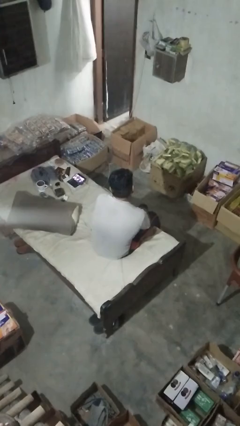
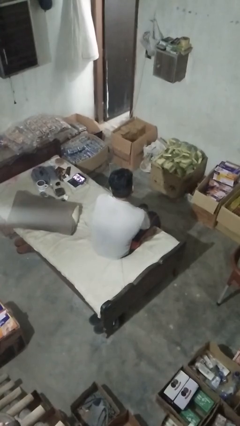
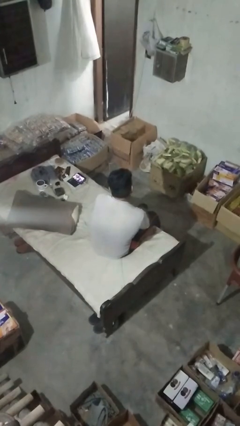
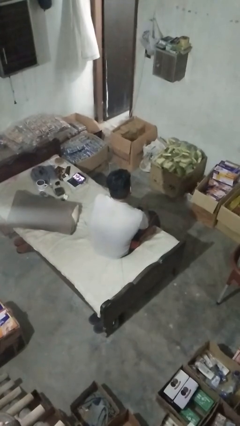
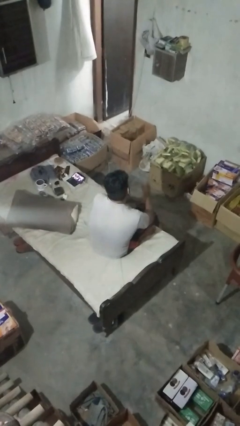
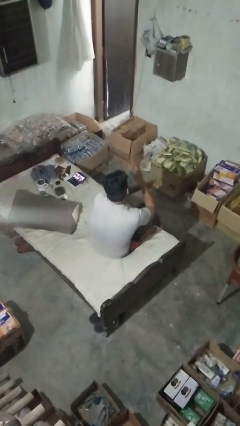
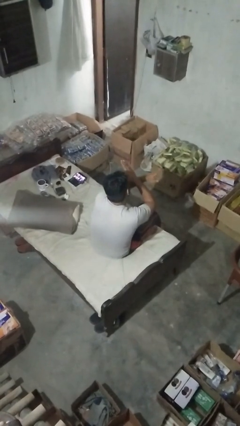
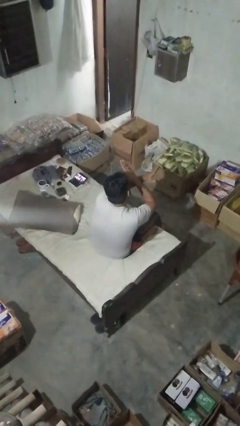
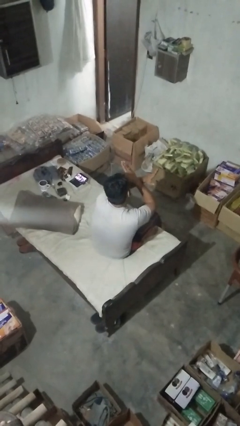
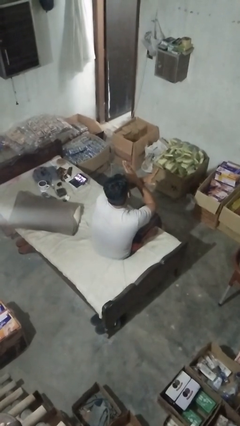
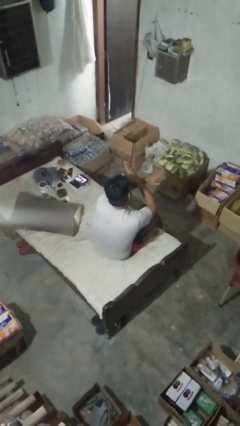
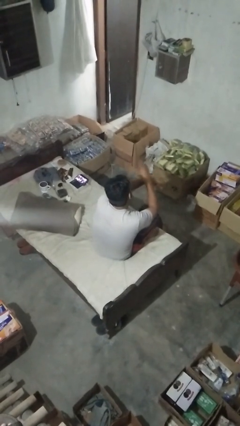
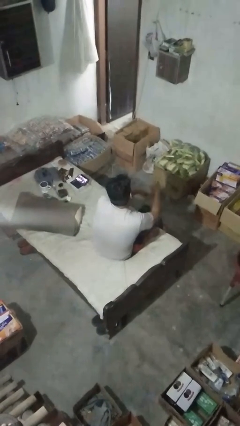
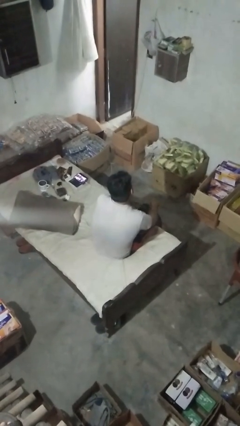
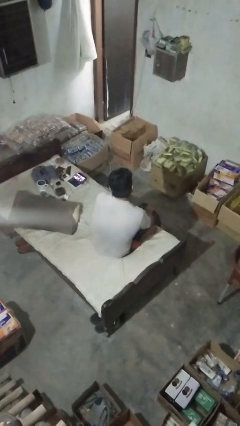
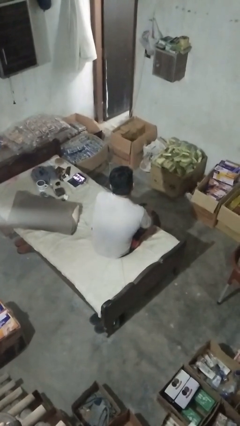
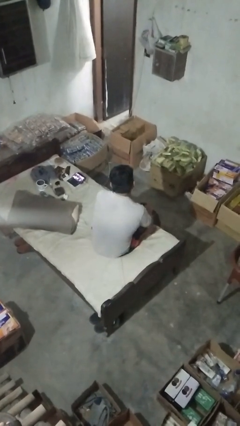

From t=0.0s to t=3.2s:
person gestures arms x

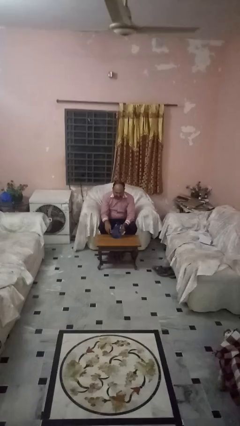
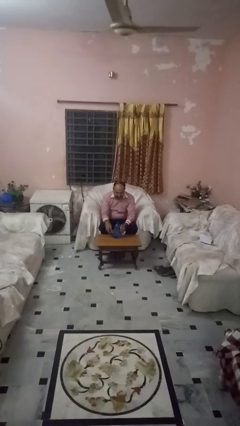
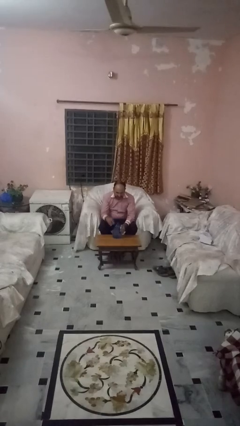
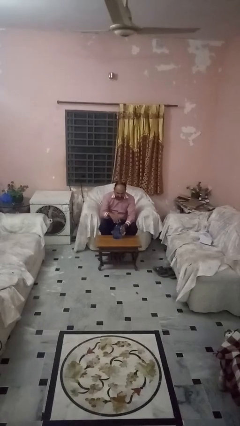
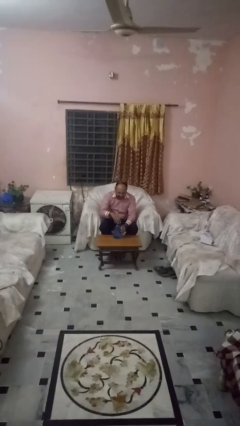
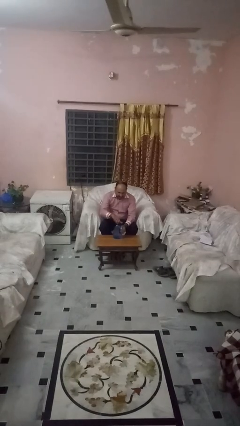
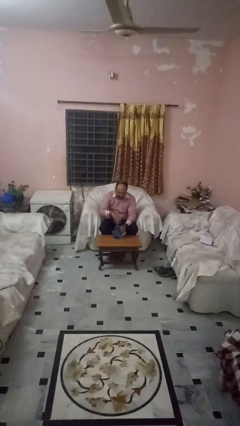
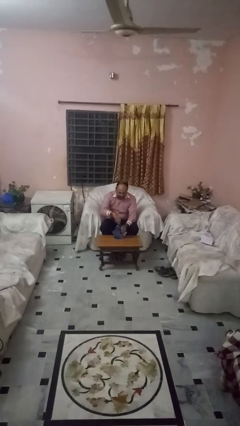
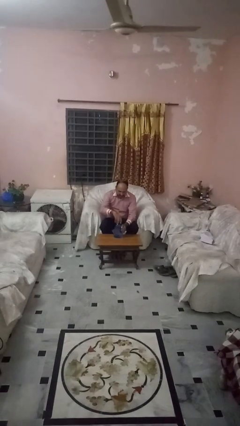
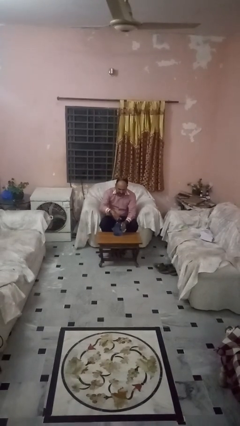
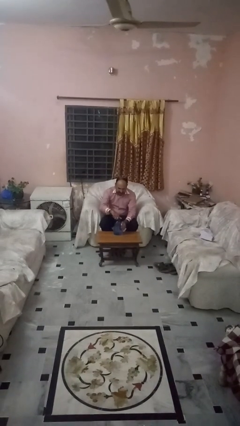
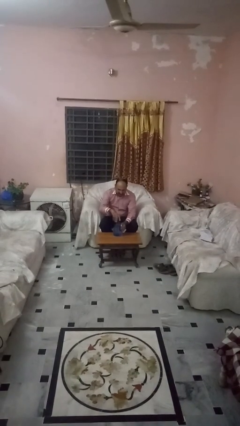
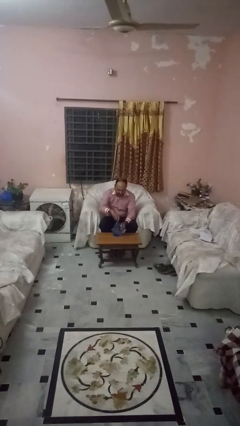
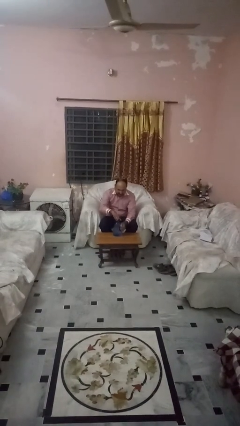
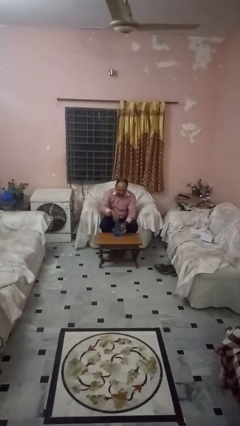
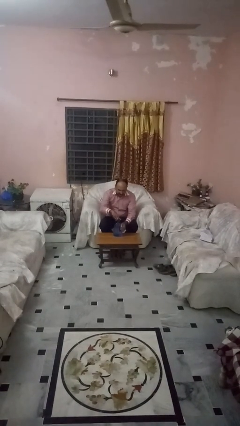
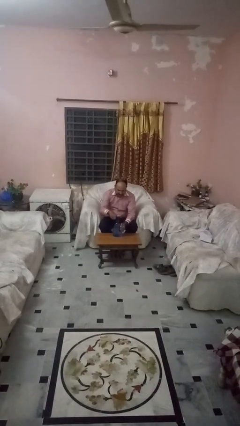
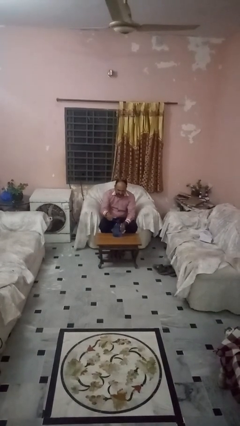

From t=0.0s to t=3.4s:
person screws lid to bottle

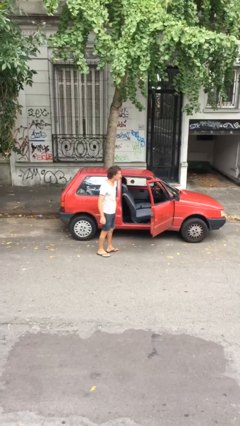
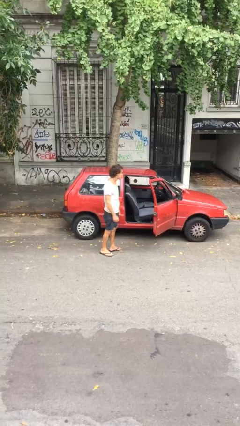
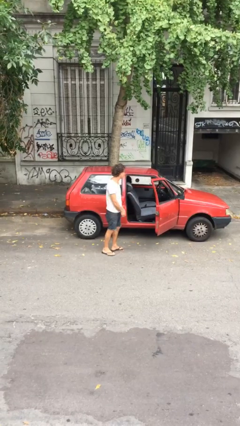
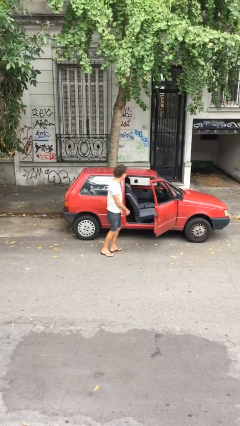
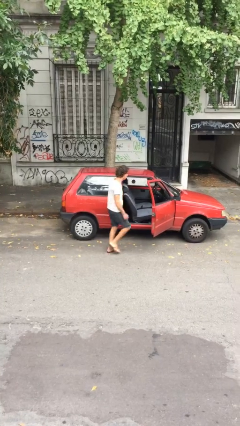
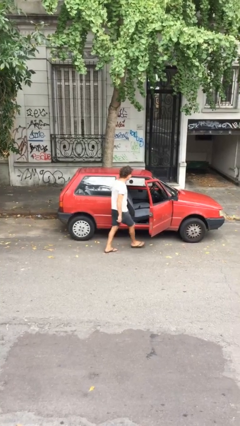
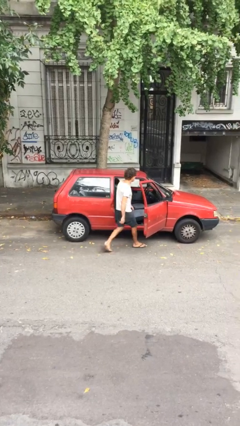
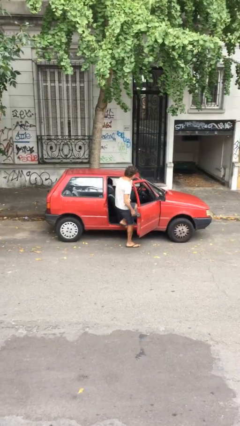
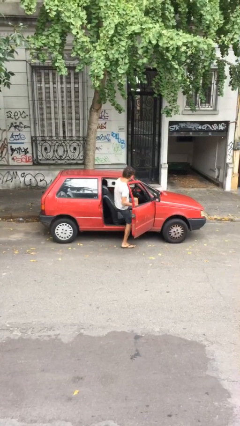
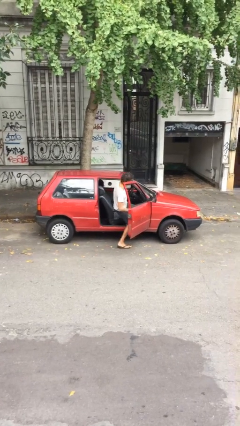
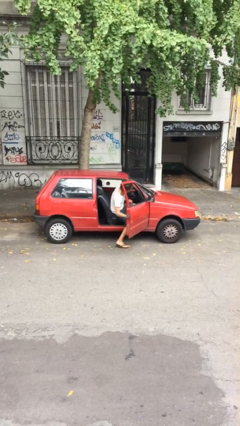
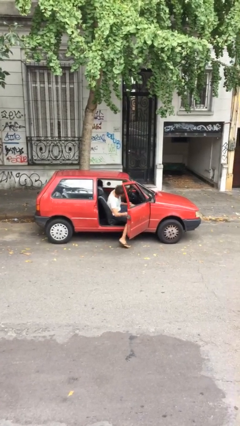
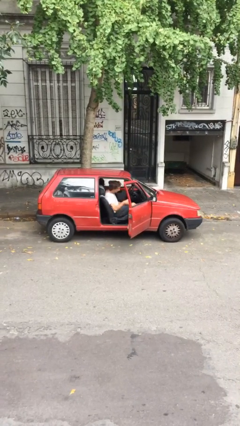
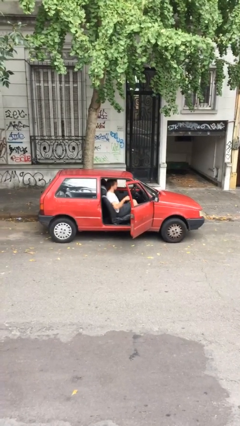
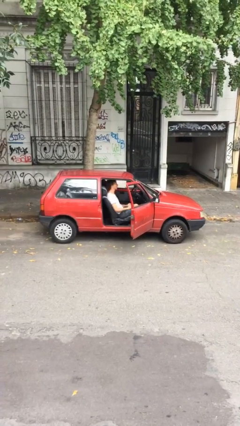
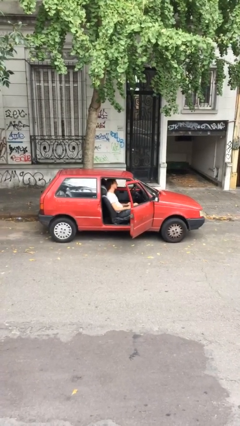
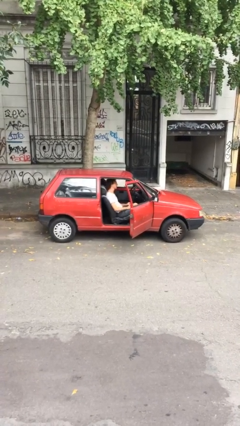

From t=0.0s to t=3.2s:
person enters car

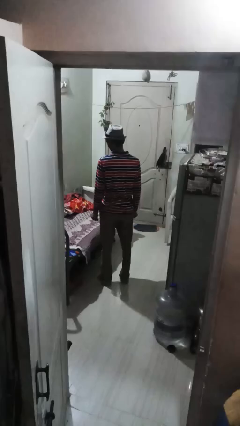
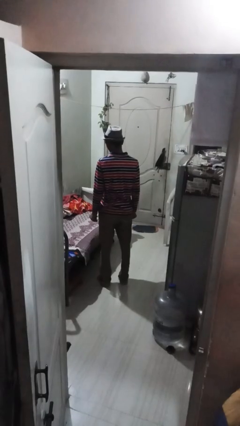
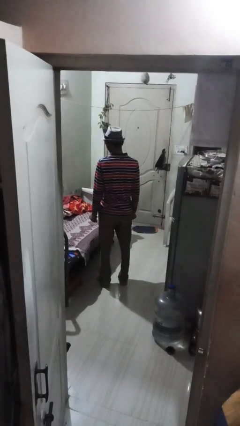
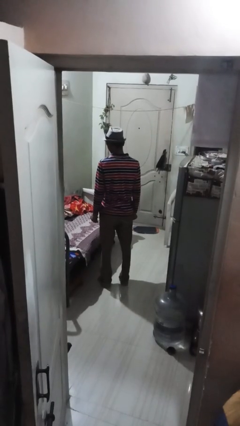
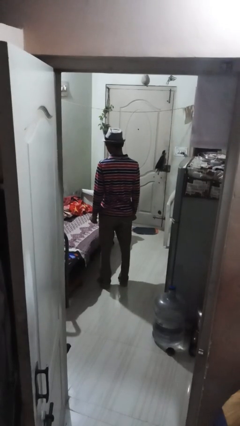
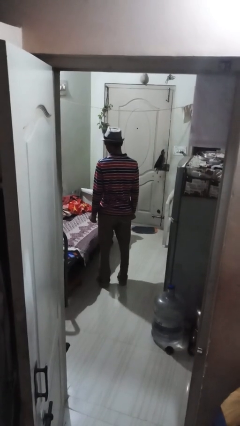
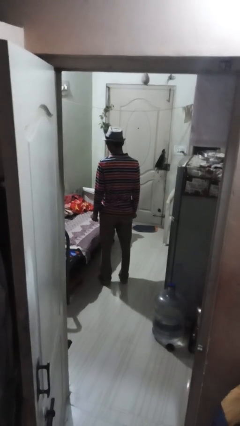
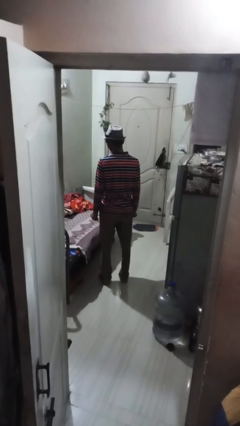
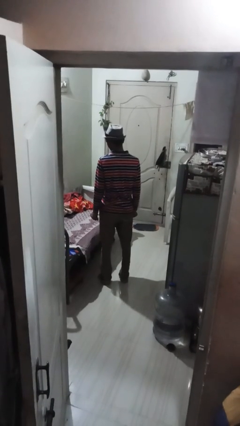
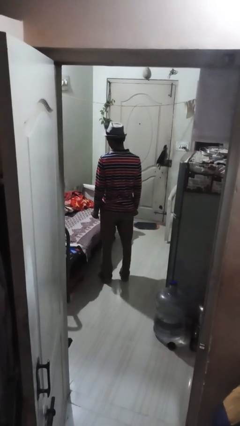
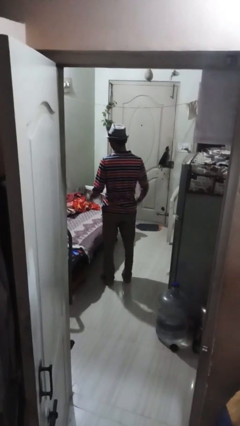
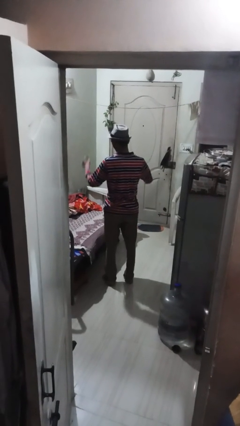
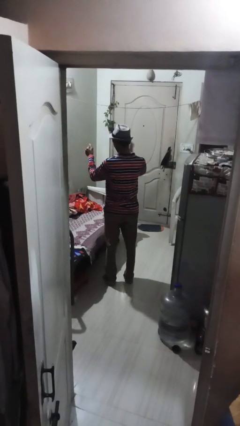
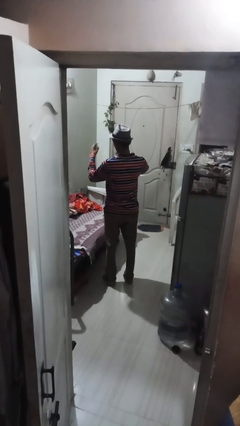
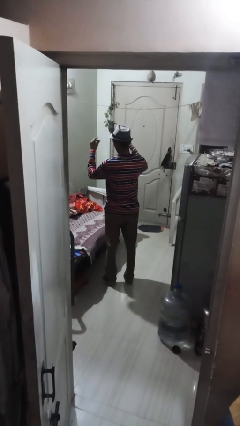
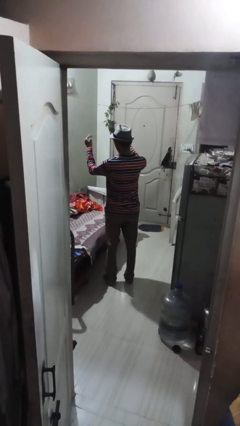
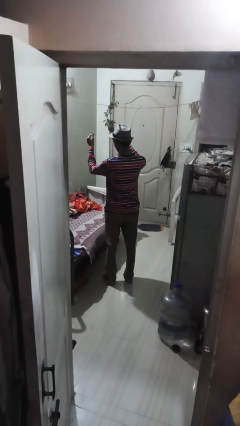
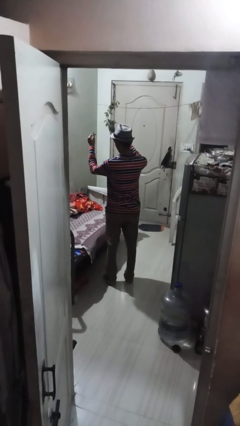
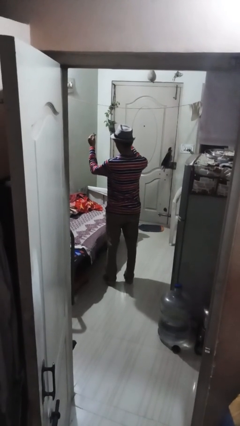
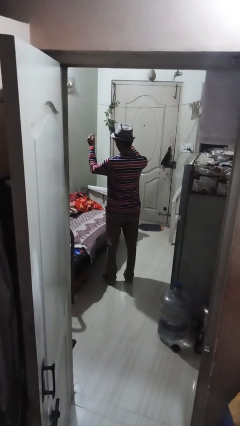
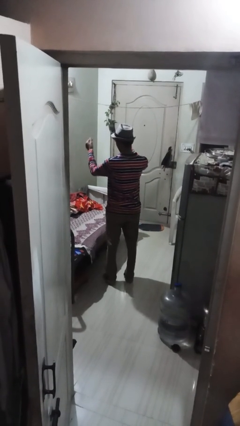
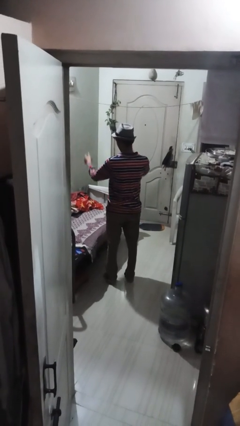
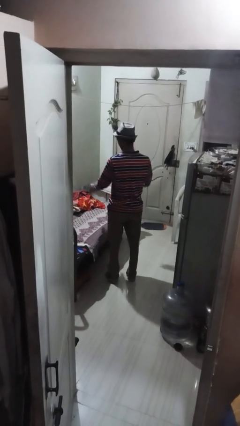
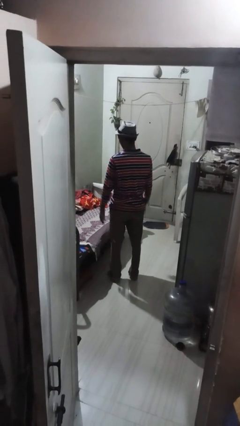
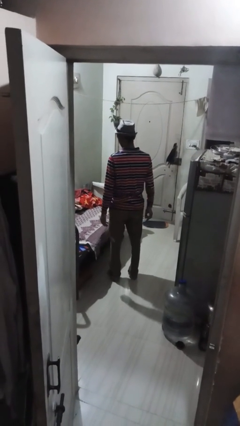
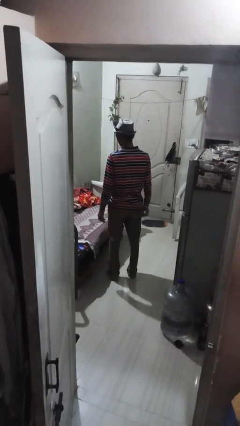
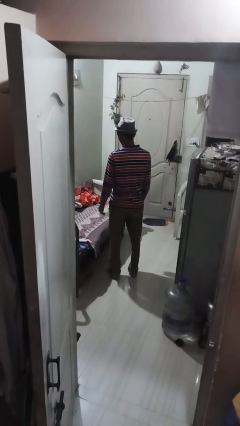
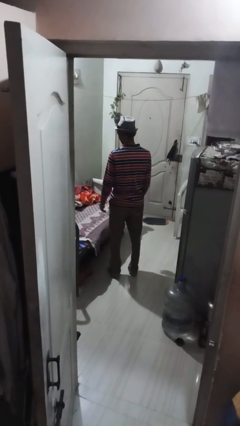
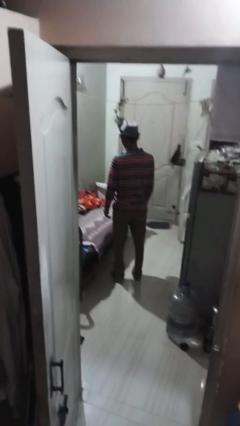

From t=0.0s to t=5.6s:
person snaps fingers

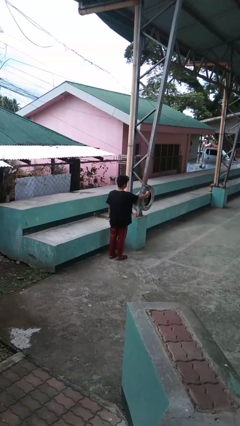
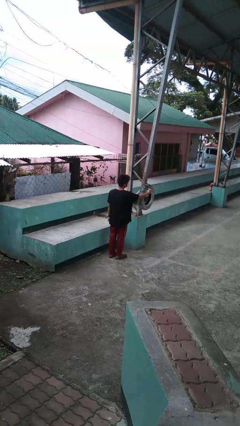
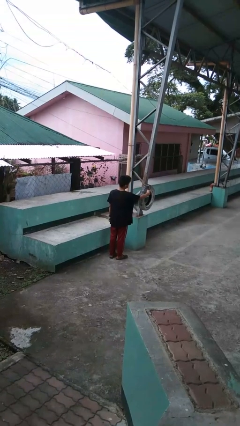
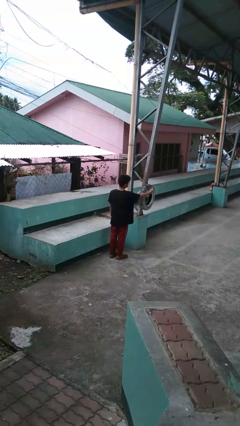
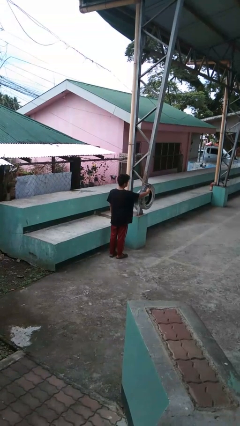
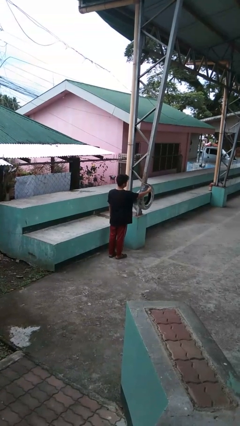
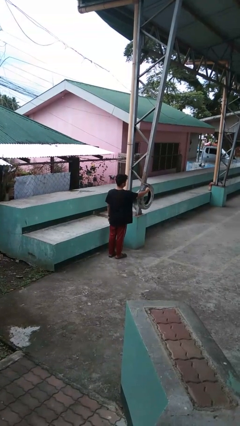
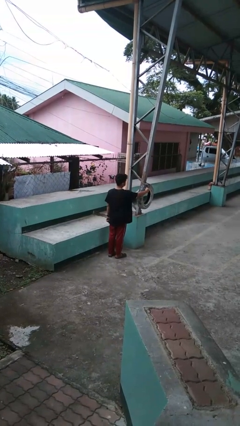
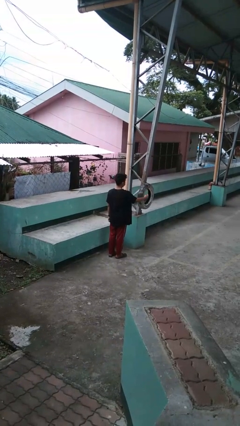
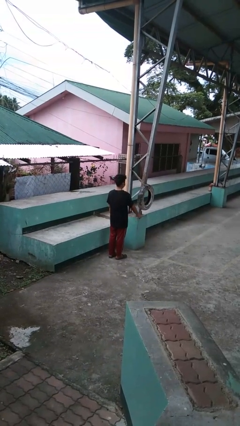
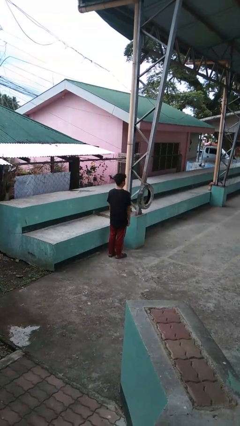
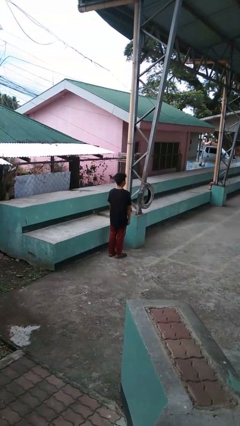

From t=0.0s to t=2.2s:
person taps object with finger
